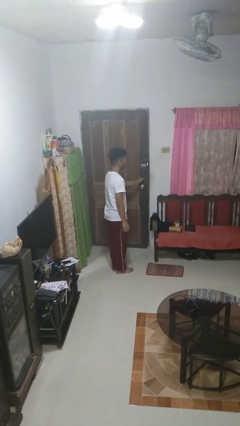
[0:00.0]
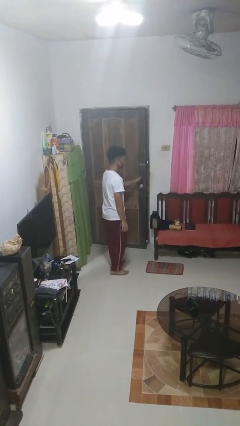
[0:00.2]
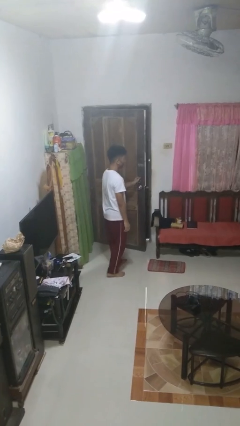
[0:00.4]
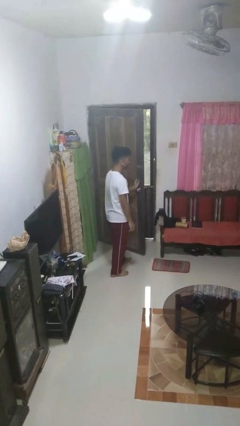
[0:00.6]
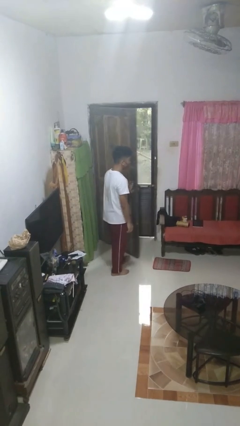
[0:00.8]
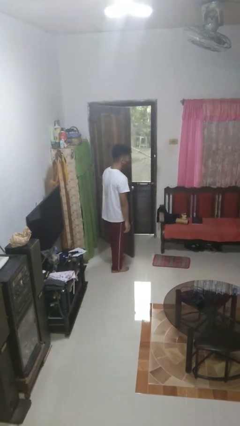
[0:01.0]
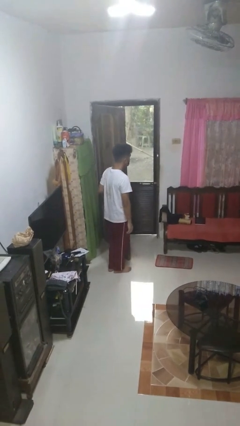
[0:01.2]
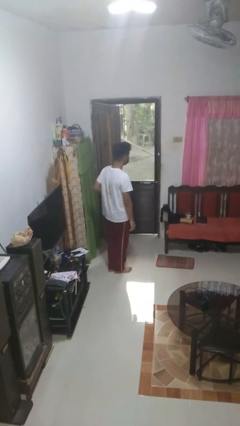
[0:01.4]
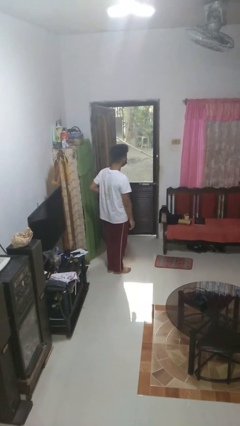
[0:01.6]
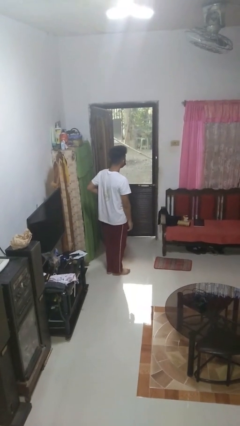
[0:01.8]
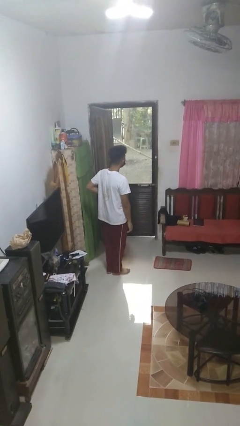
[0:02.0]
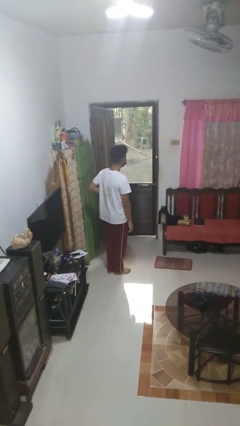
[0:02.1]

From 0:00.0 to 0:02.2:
person opens facility door

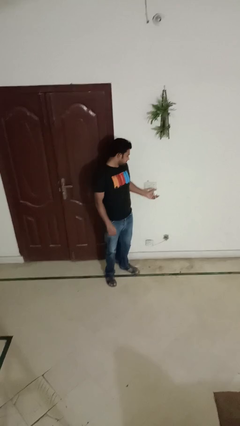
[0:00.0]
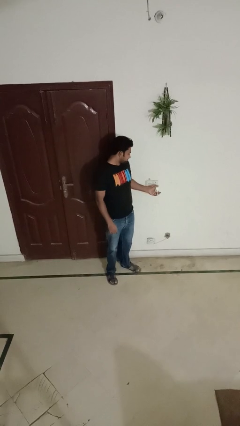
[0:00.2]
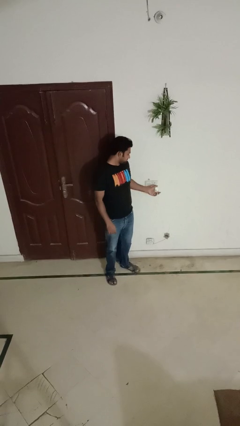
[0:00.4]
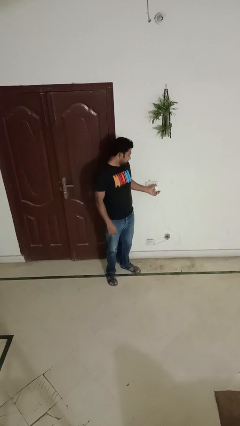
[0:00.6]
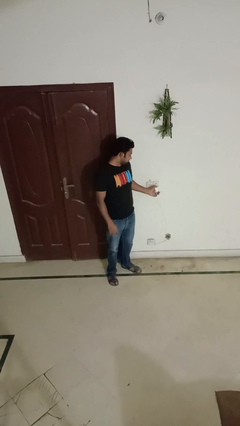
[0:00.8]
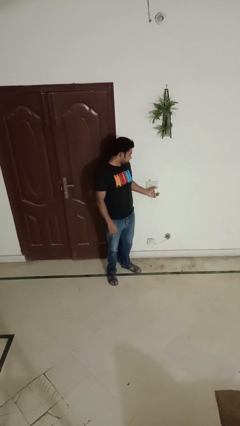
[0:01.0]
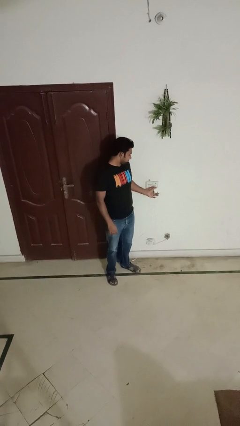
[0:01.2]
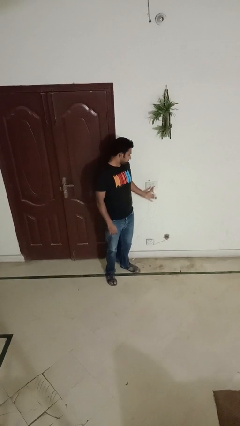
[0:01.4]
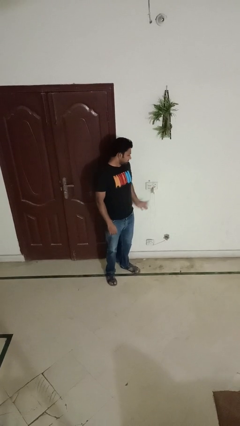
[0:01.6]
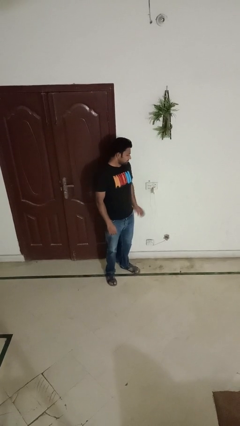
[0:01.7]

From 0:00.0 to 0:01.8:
person plugs into electrical socket

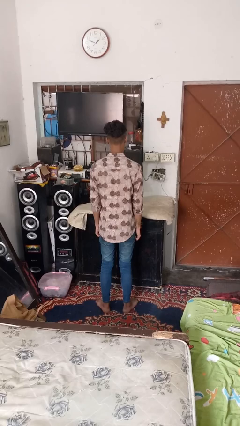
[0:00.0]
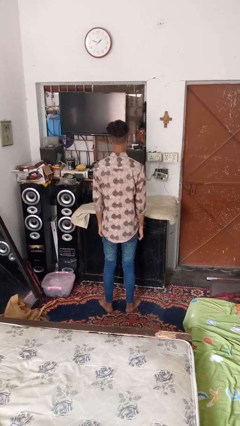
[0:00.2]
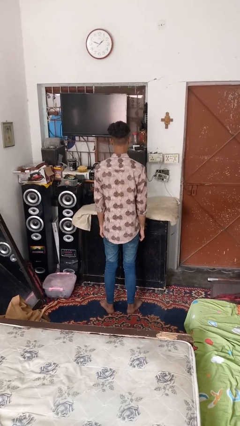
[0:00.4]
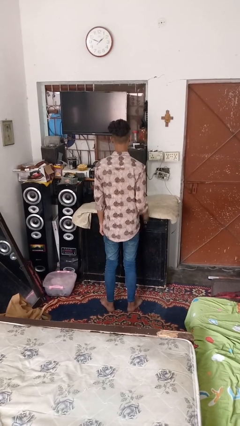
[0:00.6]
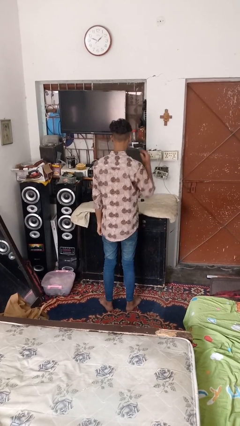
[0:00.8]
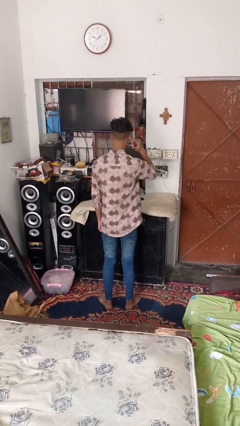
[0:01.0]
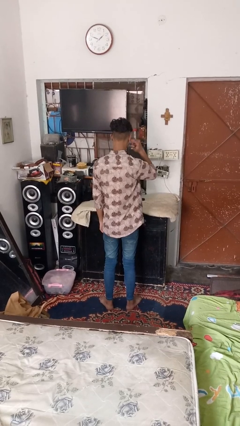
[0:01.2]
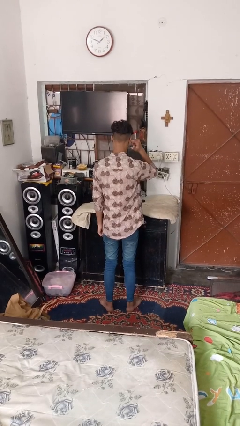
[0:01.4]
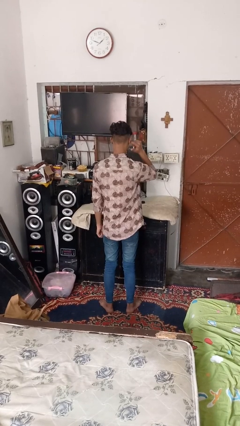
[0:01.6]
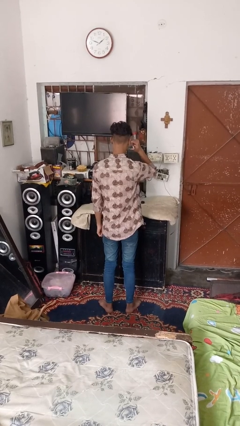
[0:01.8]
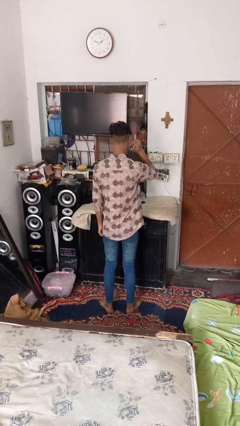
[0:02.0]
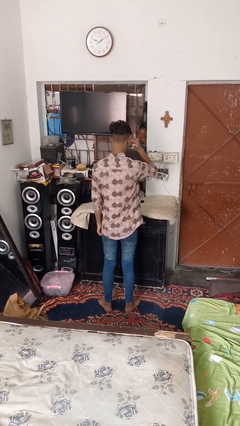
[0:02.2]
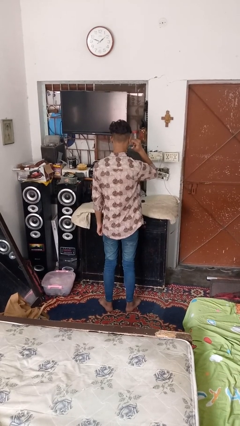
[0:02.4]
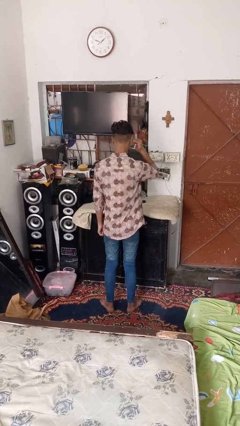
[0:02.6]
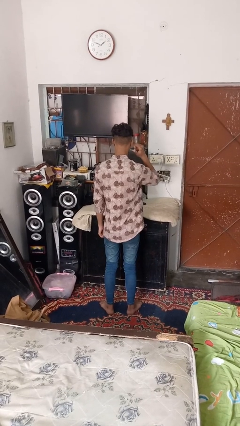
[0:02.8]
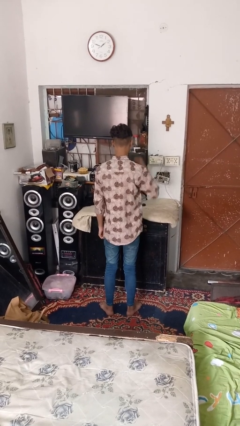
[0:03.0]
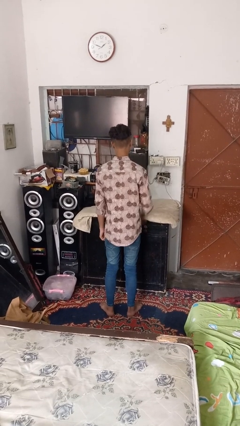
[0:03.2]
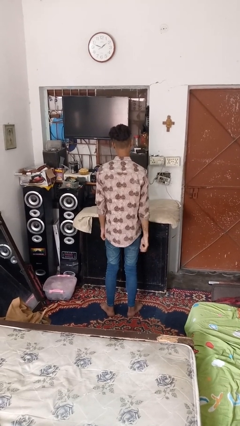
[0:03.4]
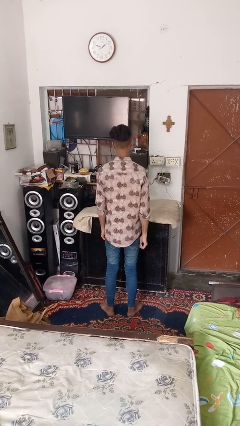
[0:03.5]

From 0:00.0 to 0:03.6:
person puts fingers in ear

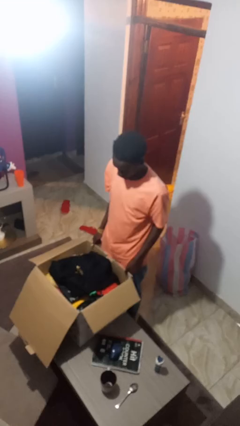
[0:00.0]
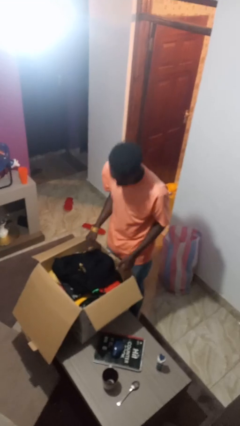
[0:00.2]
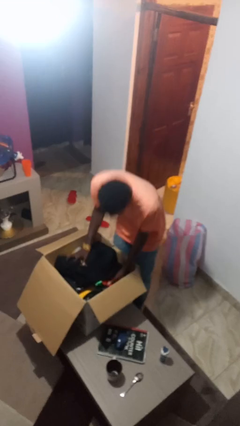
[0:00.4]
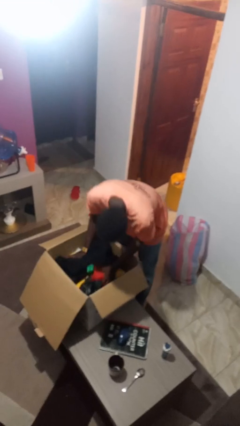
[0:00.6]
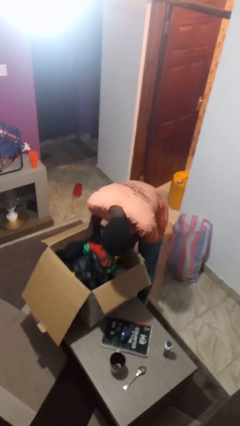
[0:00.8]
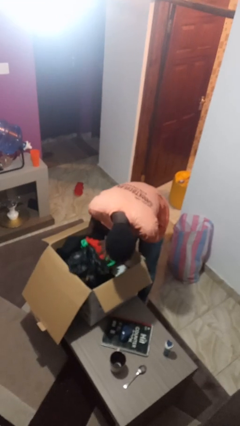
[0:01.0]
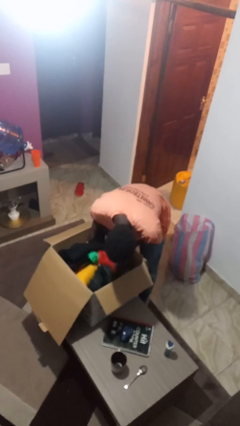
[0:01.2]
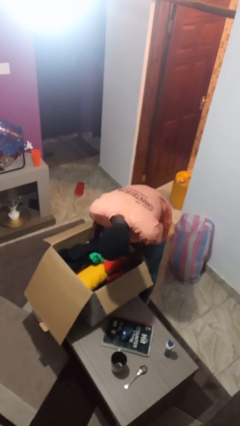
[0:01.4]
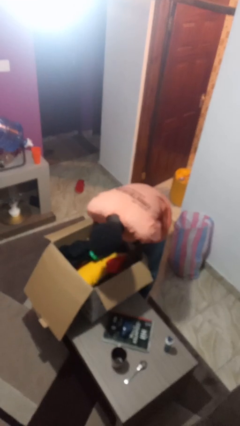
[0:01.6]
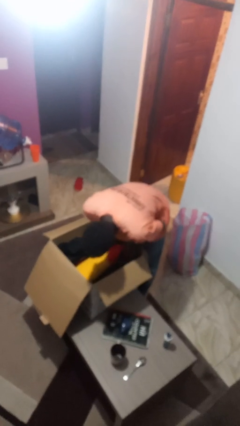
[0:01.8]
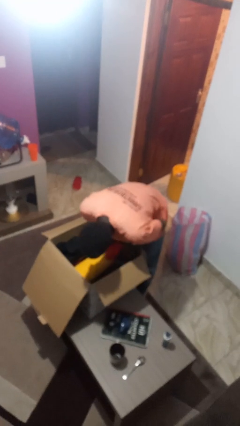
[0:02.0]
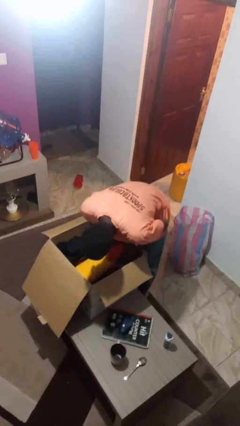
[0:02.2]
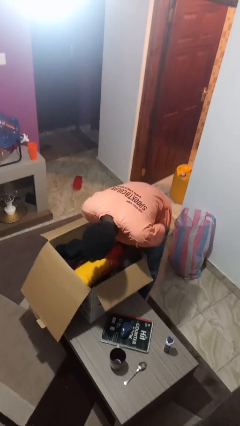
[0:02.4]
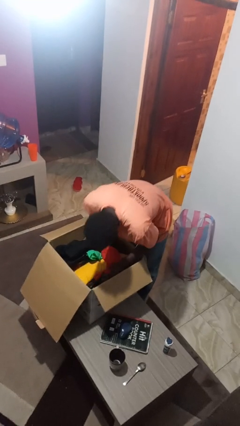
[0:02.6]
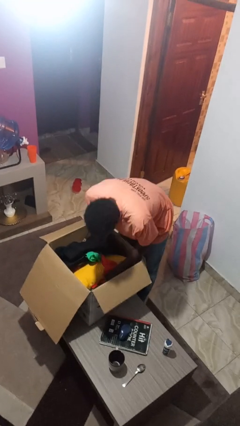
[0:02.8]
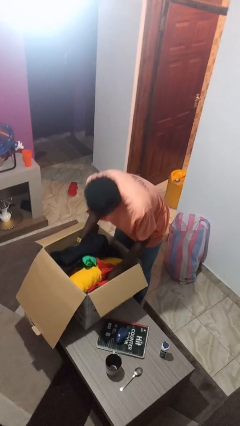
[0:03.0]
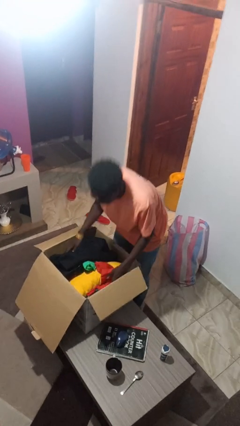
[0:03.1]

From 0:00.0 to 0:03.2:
person searches in box

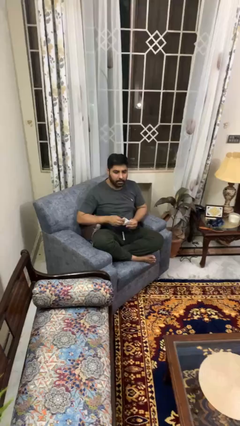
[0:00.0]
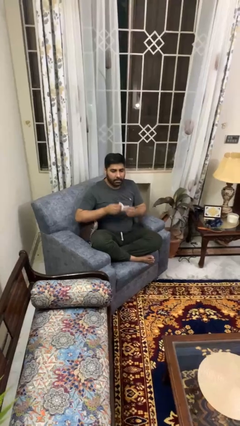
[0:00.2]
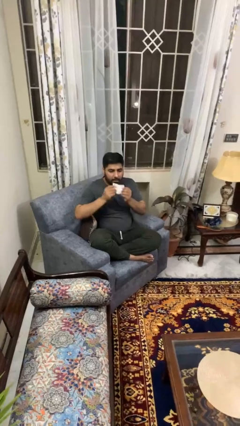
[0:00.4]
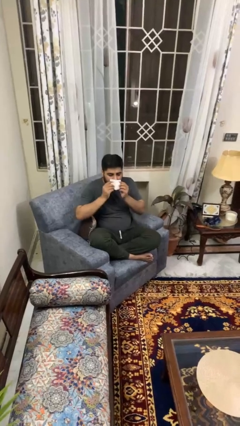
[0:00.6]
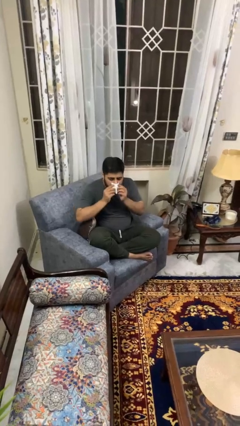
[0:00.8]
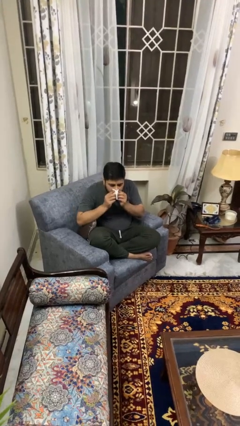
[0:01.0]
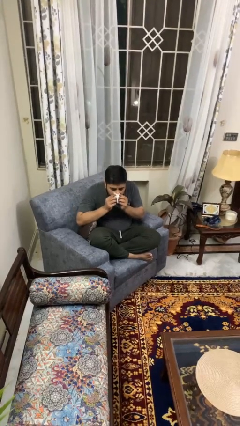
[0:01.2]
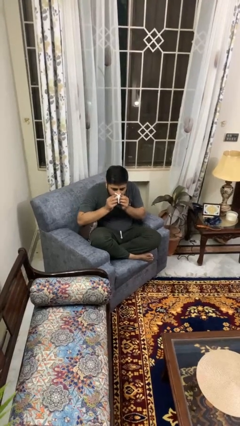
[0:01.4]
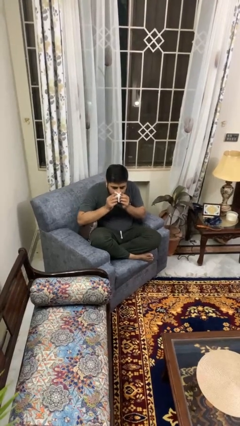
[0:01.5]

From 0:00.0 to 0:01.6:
person blows nose

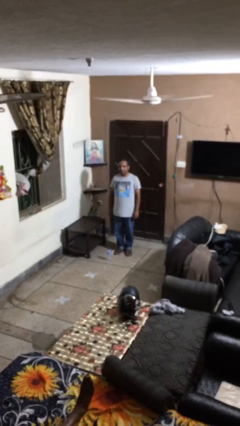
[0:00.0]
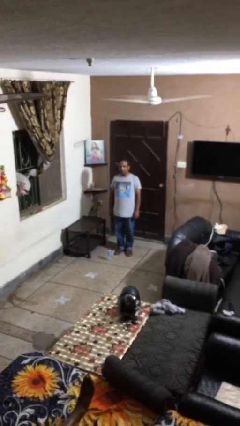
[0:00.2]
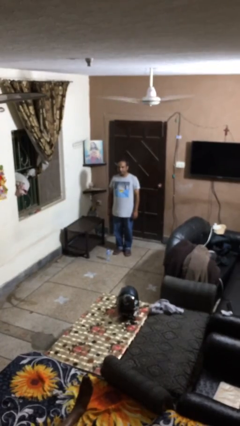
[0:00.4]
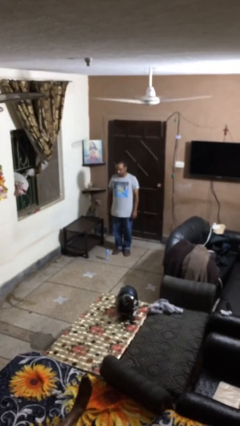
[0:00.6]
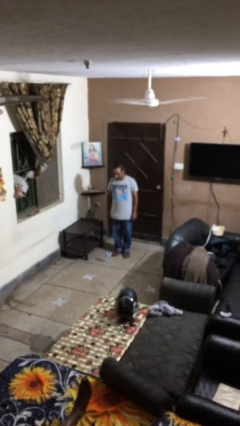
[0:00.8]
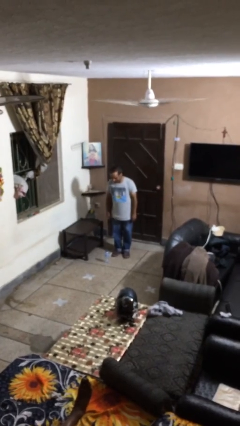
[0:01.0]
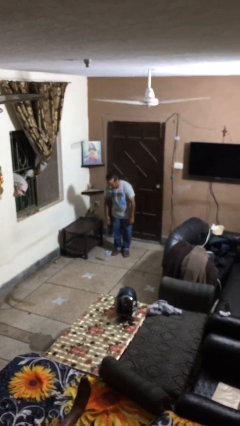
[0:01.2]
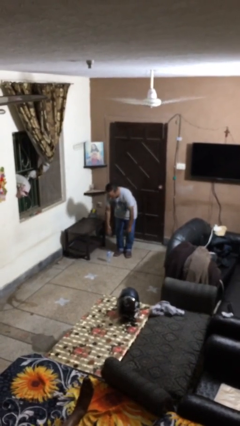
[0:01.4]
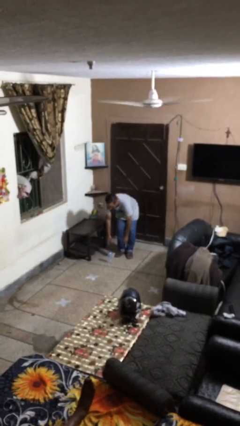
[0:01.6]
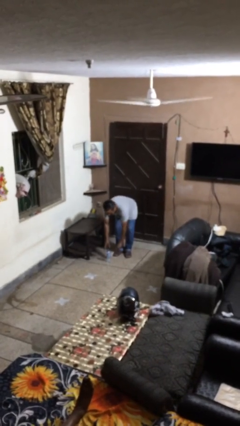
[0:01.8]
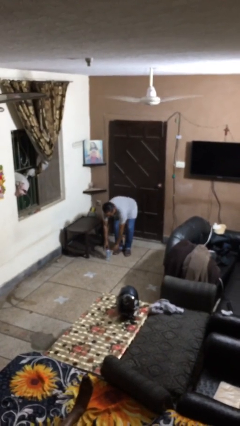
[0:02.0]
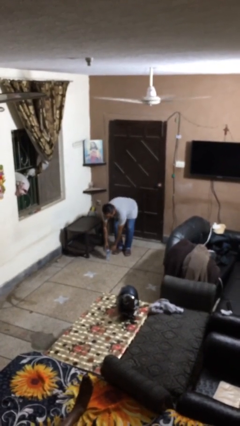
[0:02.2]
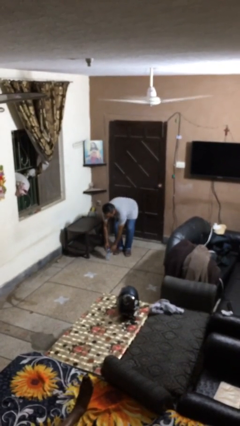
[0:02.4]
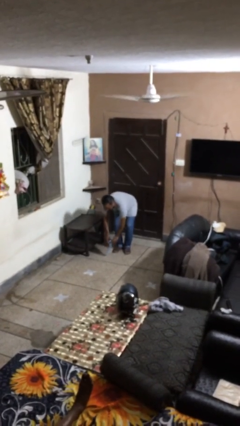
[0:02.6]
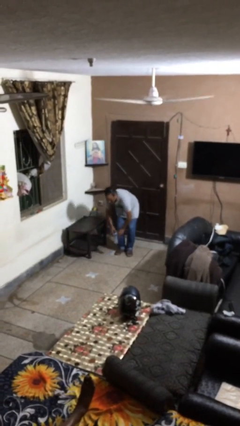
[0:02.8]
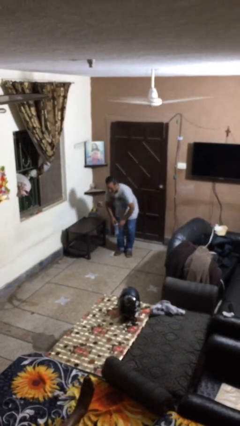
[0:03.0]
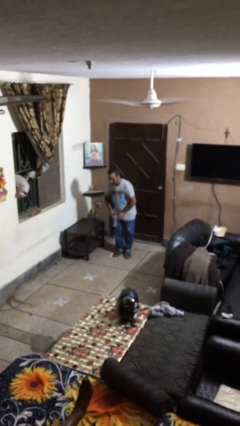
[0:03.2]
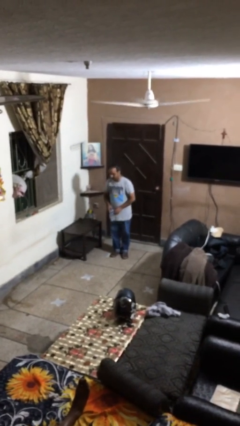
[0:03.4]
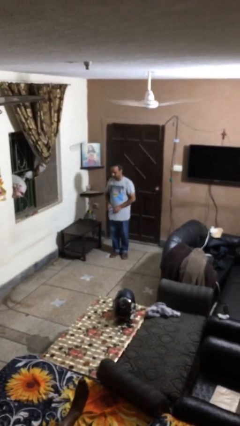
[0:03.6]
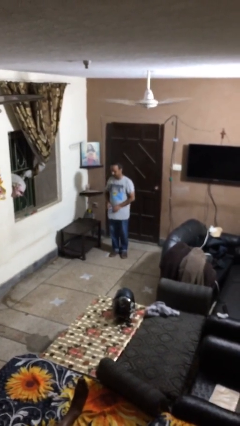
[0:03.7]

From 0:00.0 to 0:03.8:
person picks up object from floor

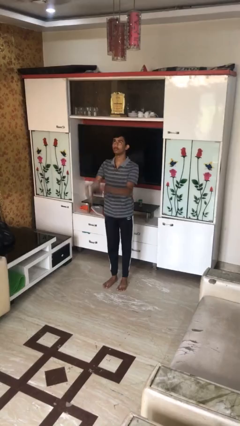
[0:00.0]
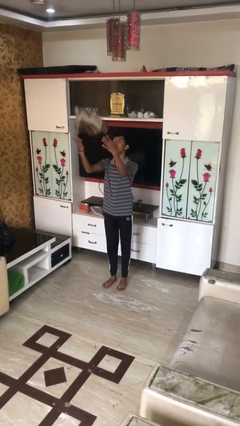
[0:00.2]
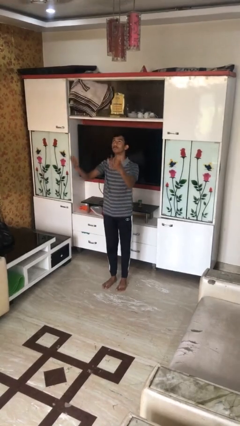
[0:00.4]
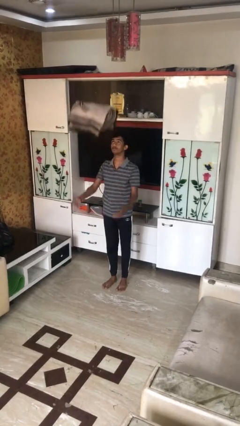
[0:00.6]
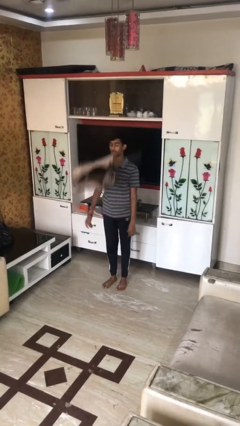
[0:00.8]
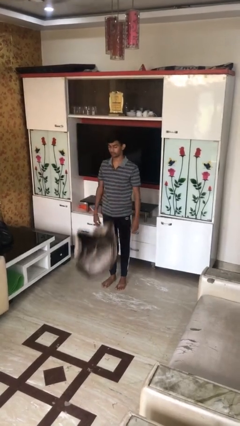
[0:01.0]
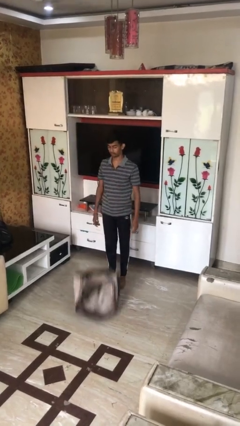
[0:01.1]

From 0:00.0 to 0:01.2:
person throws object into air
